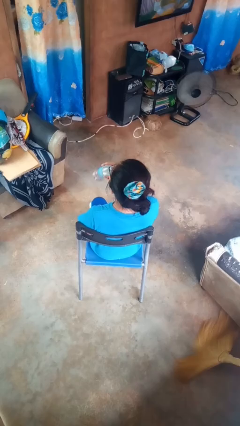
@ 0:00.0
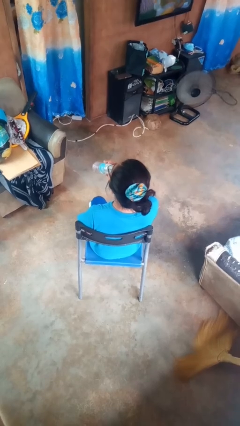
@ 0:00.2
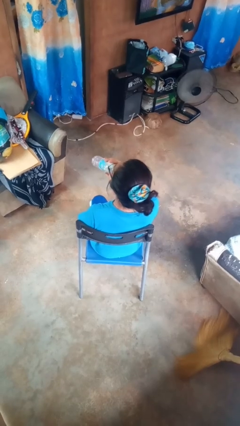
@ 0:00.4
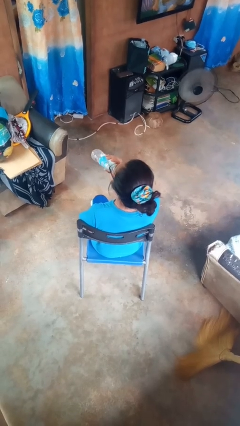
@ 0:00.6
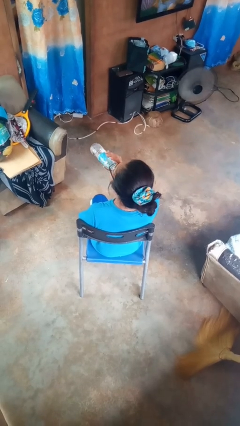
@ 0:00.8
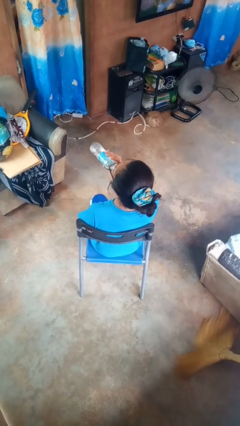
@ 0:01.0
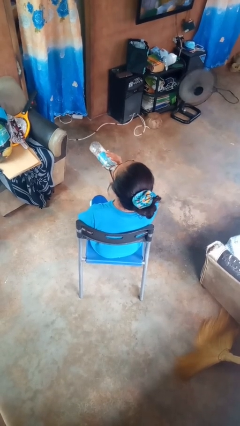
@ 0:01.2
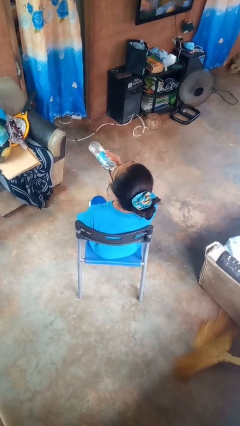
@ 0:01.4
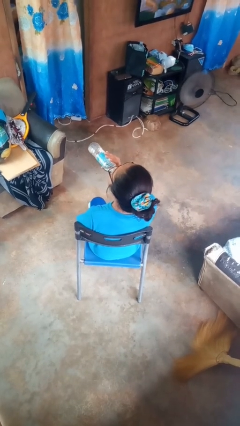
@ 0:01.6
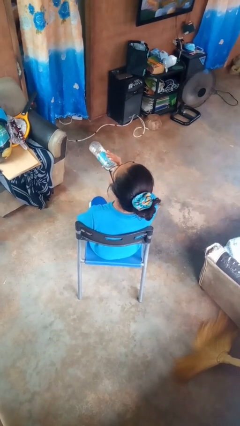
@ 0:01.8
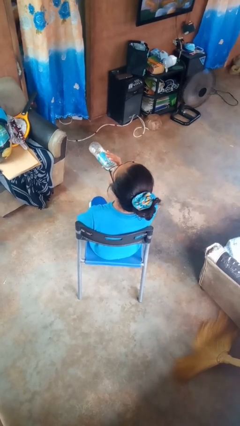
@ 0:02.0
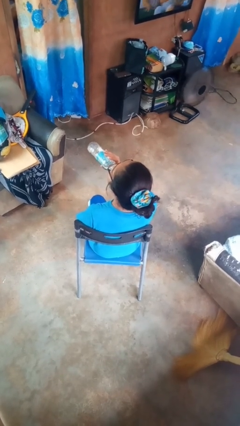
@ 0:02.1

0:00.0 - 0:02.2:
person drinks from bottle

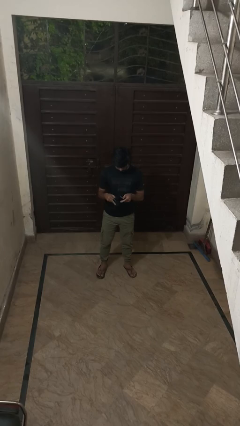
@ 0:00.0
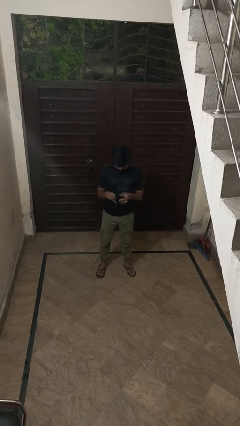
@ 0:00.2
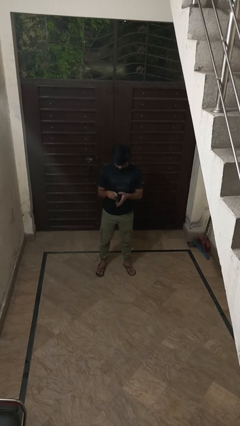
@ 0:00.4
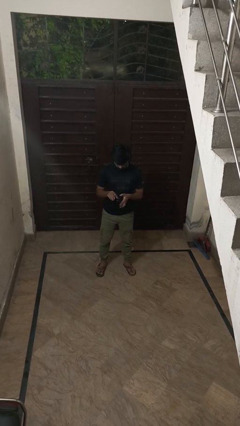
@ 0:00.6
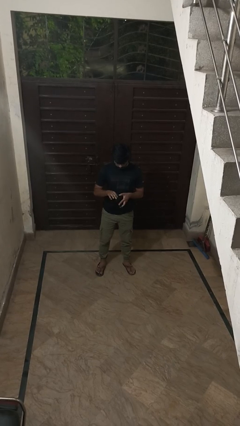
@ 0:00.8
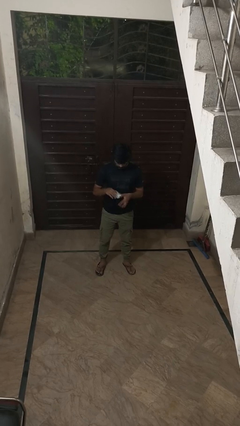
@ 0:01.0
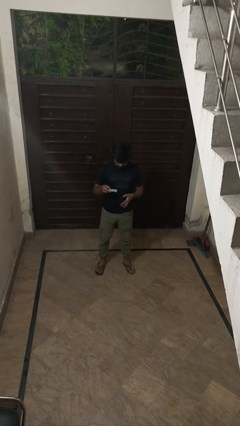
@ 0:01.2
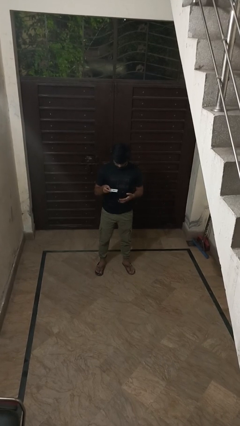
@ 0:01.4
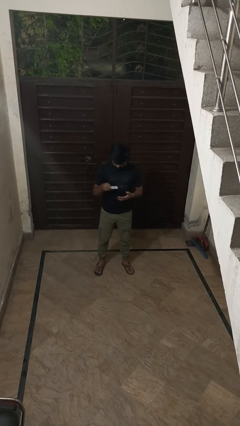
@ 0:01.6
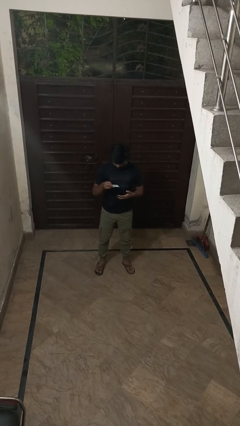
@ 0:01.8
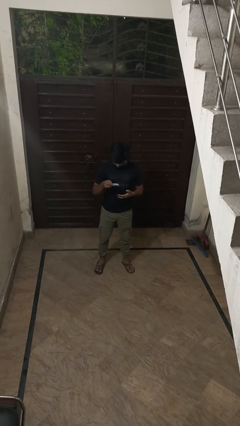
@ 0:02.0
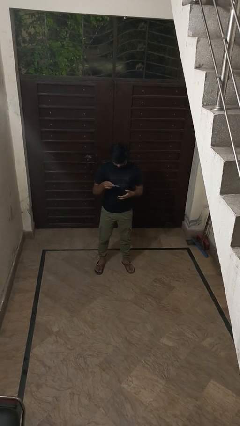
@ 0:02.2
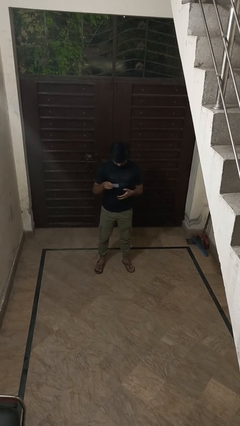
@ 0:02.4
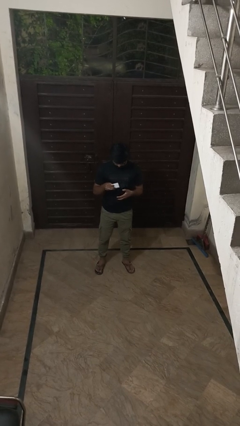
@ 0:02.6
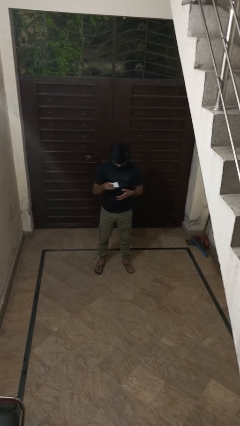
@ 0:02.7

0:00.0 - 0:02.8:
person takes object from purse

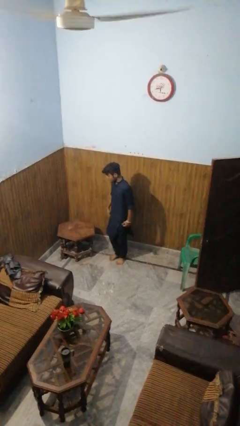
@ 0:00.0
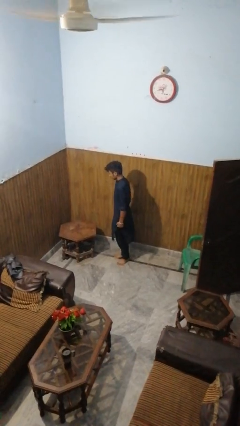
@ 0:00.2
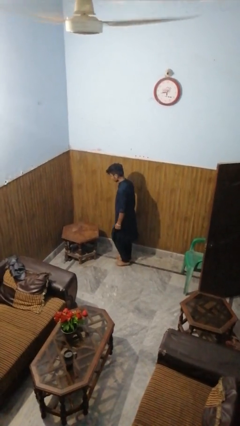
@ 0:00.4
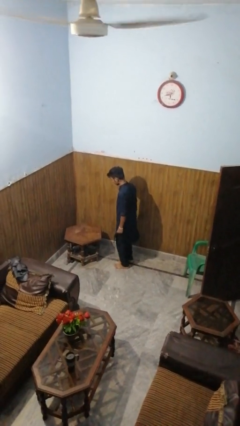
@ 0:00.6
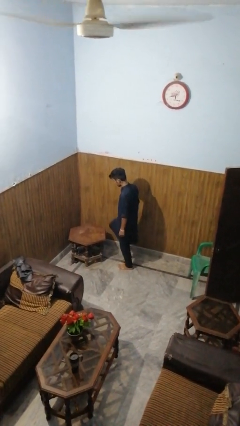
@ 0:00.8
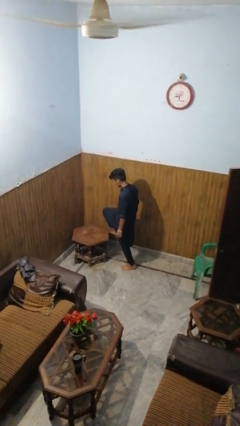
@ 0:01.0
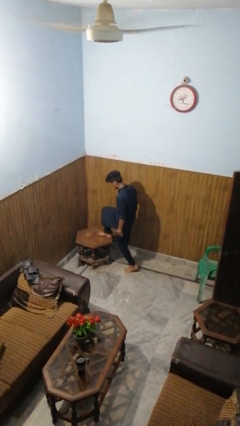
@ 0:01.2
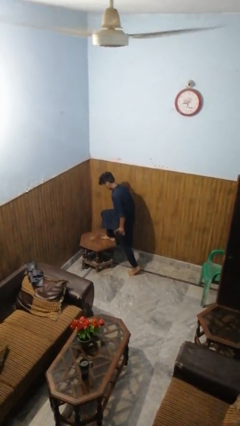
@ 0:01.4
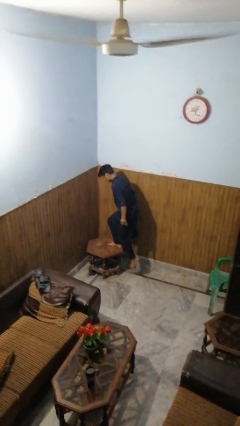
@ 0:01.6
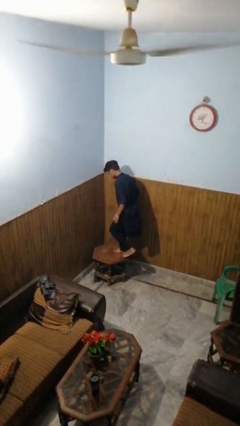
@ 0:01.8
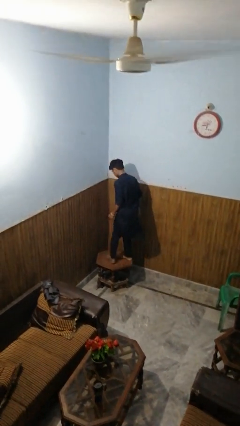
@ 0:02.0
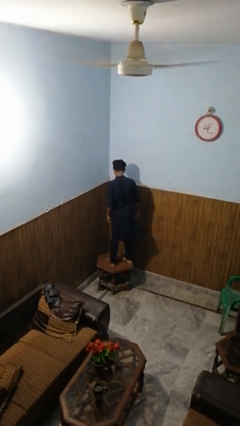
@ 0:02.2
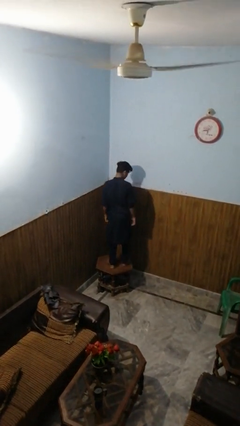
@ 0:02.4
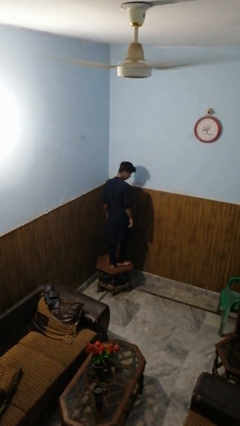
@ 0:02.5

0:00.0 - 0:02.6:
person climbs on table

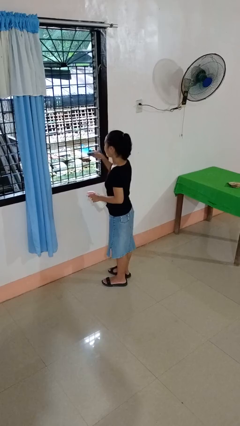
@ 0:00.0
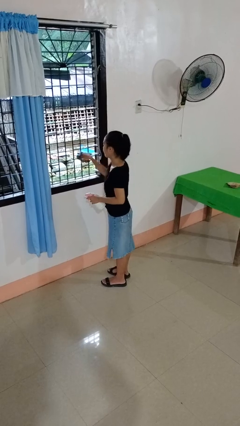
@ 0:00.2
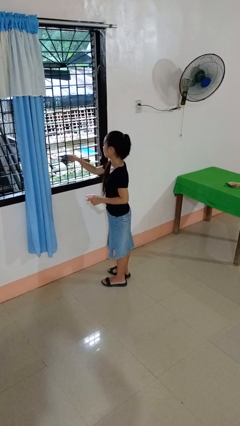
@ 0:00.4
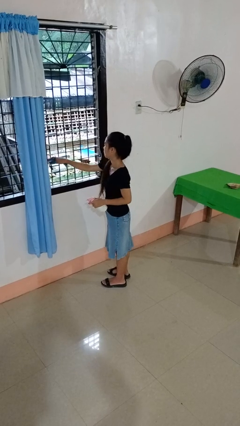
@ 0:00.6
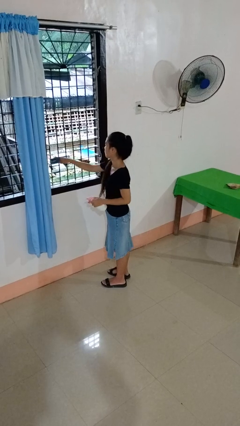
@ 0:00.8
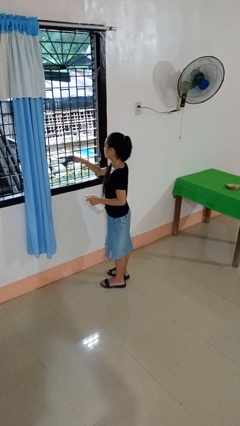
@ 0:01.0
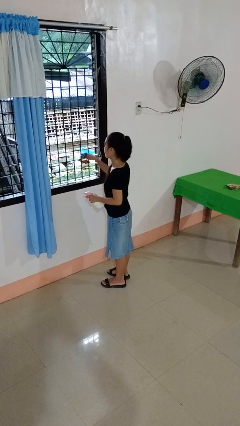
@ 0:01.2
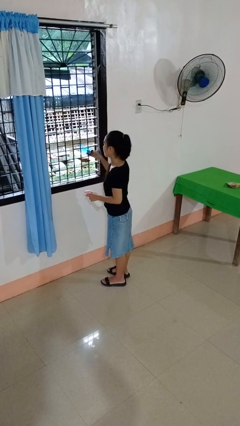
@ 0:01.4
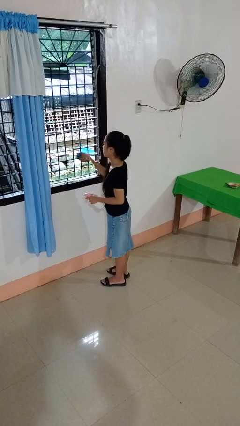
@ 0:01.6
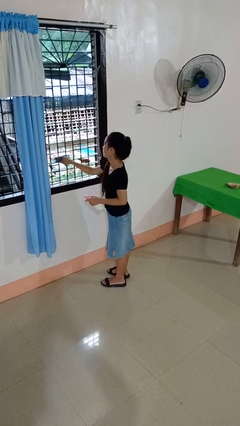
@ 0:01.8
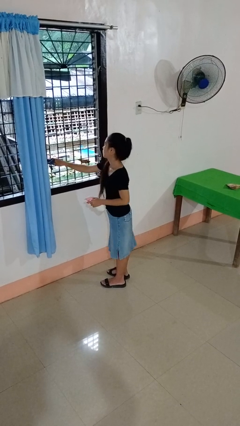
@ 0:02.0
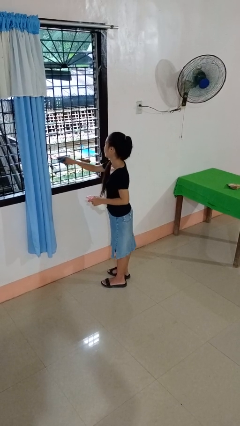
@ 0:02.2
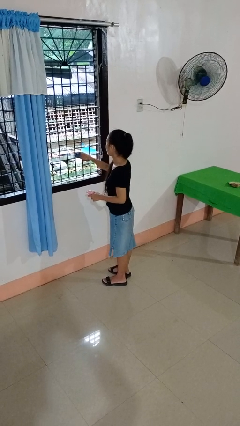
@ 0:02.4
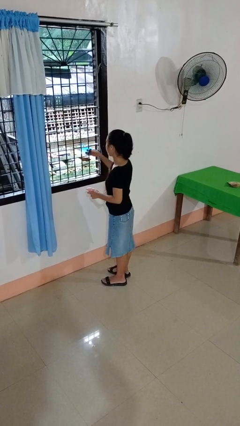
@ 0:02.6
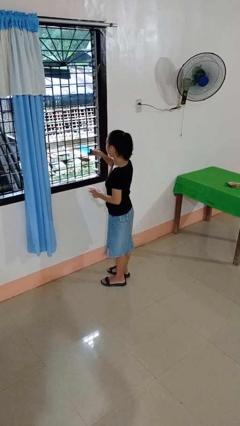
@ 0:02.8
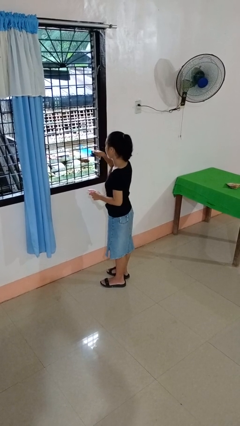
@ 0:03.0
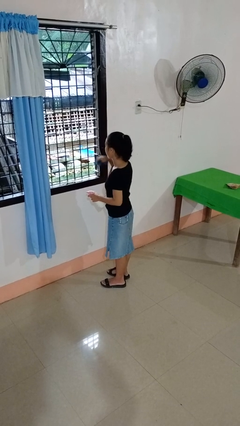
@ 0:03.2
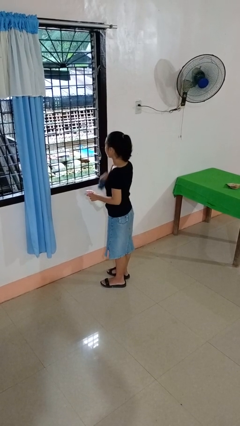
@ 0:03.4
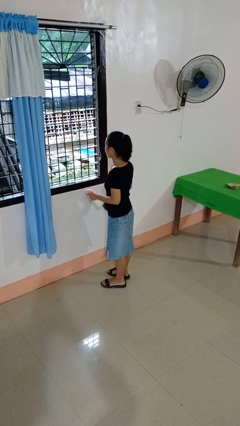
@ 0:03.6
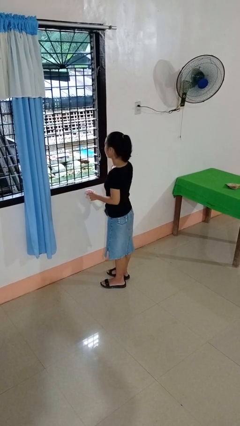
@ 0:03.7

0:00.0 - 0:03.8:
person washes window

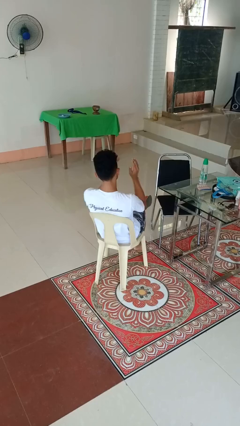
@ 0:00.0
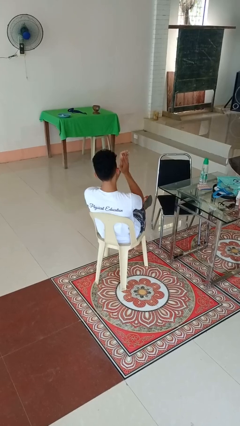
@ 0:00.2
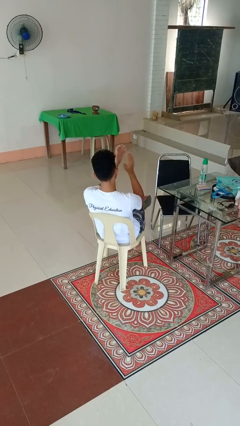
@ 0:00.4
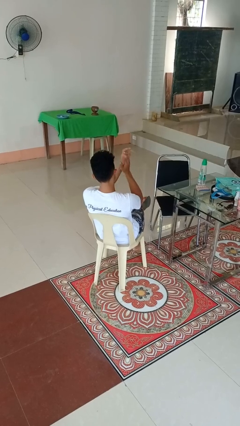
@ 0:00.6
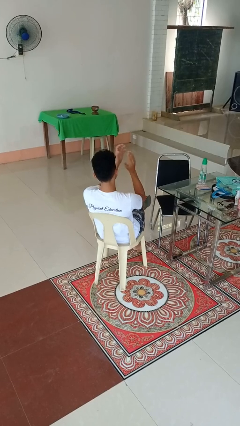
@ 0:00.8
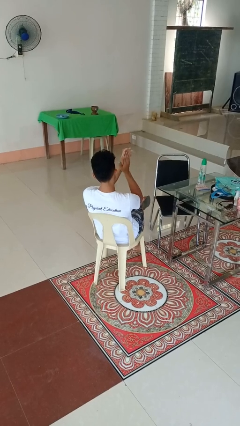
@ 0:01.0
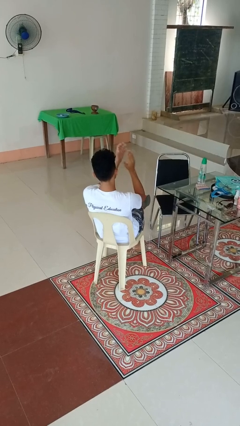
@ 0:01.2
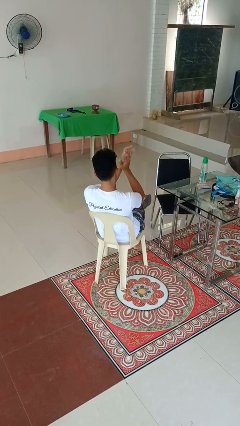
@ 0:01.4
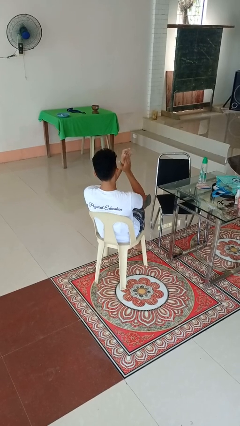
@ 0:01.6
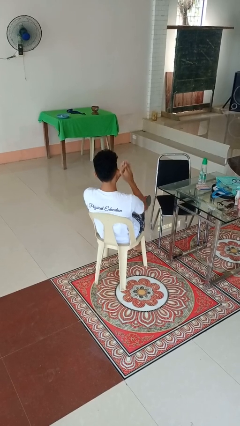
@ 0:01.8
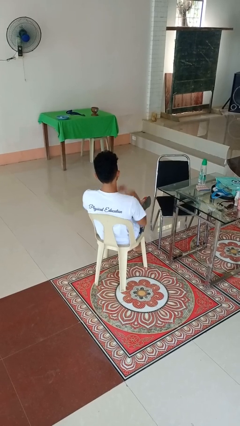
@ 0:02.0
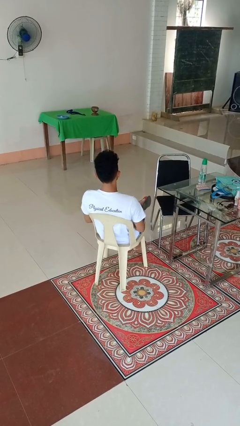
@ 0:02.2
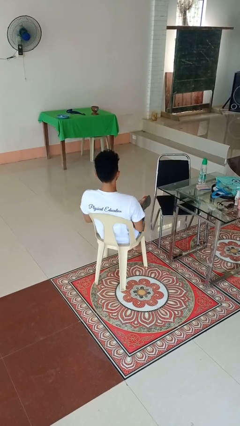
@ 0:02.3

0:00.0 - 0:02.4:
person claps hands

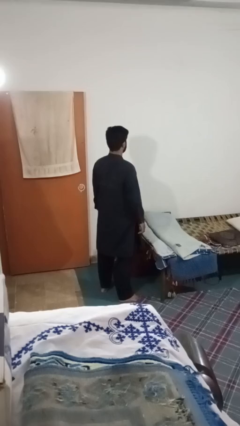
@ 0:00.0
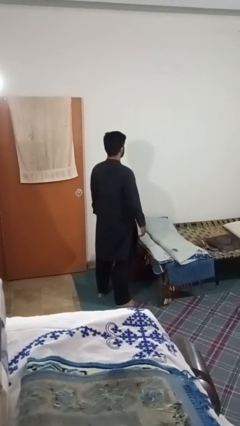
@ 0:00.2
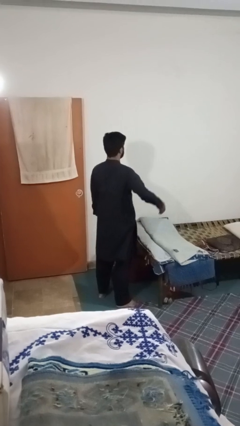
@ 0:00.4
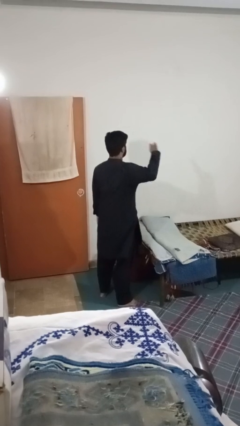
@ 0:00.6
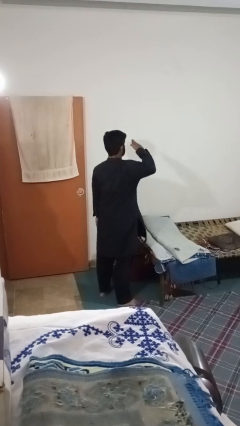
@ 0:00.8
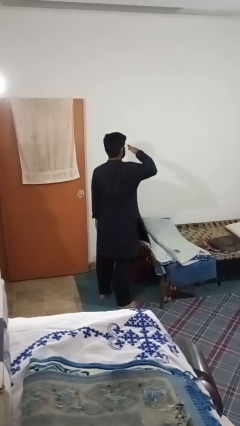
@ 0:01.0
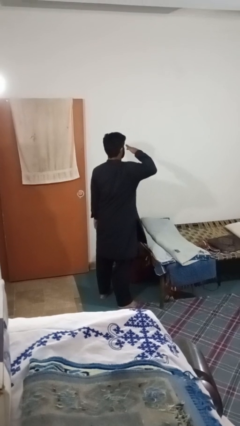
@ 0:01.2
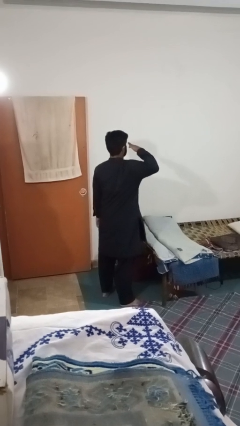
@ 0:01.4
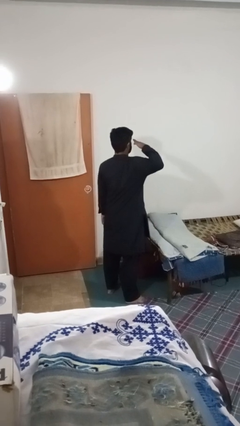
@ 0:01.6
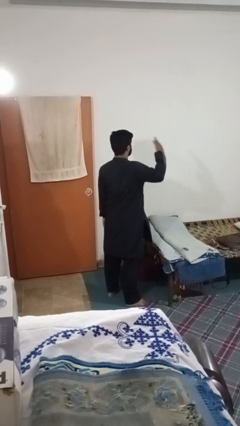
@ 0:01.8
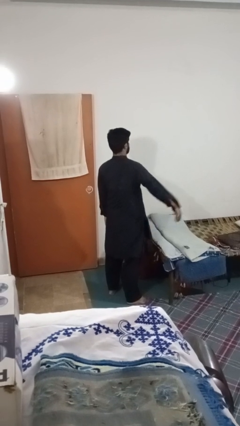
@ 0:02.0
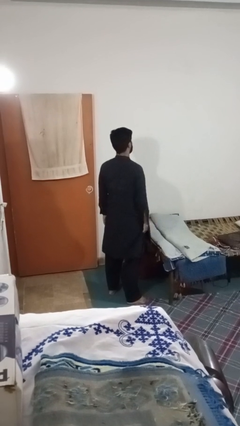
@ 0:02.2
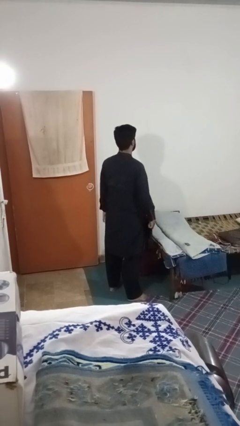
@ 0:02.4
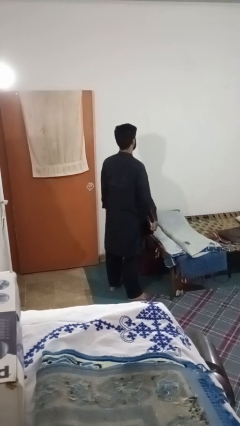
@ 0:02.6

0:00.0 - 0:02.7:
person salutes

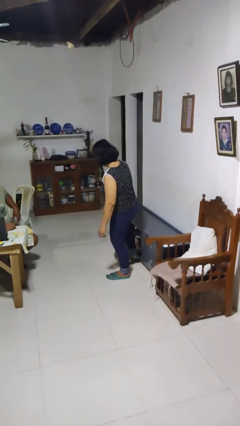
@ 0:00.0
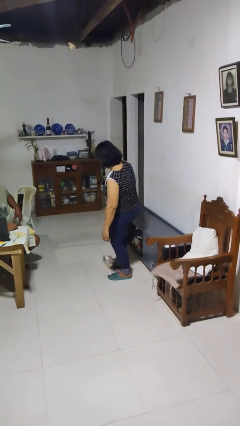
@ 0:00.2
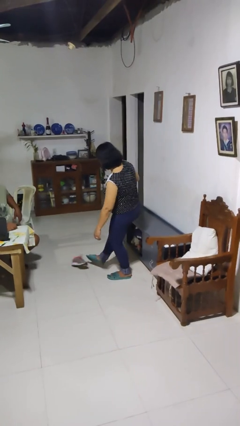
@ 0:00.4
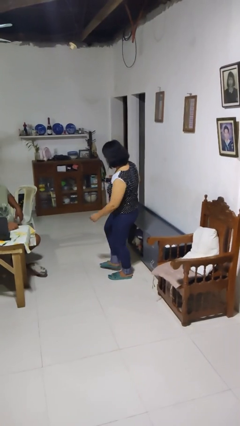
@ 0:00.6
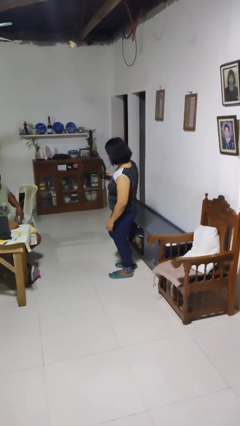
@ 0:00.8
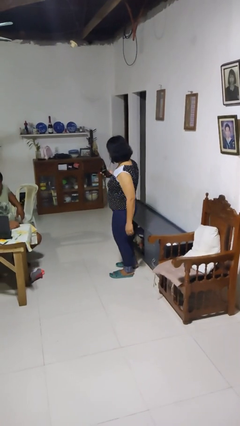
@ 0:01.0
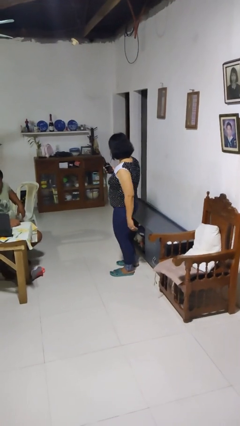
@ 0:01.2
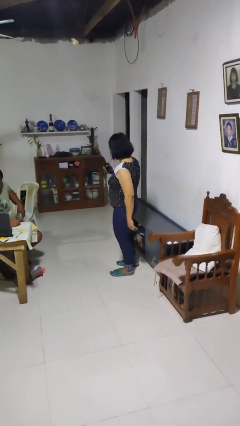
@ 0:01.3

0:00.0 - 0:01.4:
person kicks object to person
